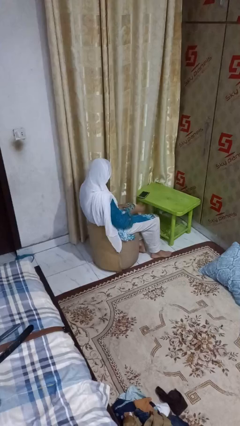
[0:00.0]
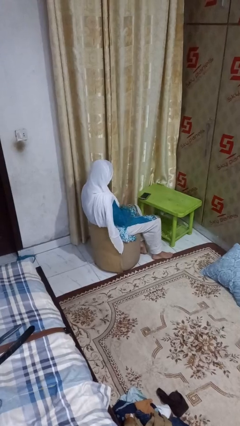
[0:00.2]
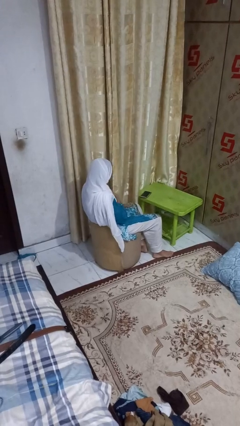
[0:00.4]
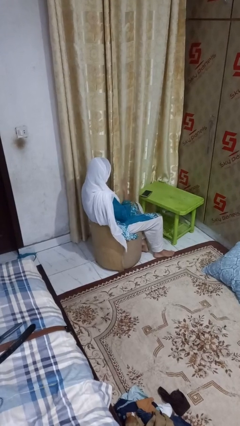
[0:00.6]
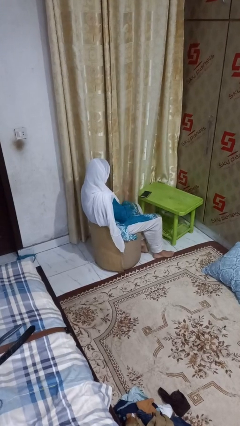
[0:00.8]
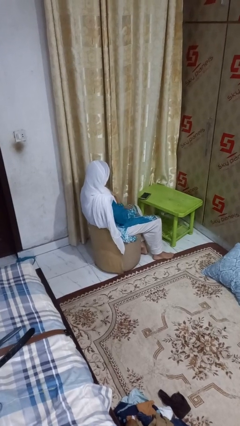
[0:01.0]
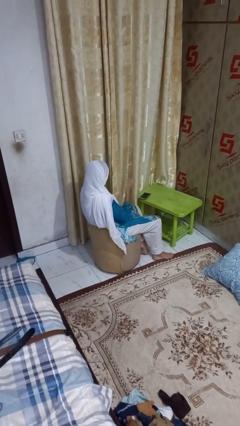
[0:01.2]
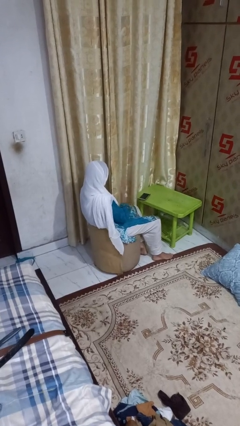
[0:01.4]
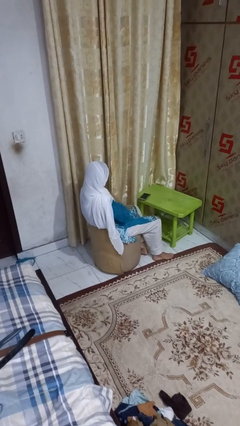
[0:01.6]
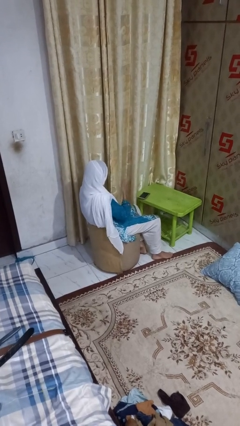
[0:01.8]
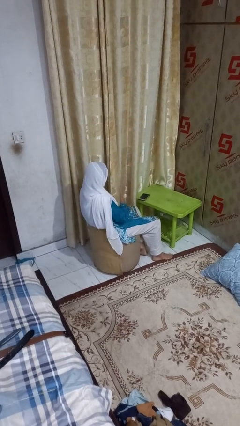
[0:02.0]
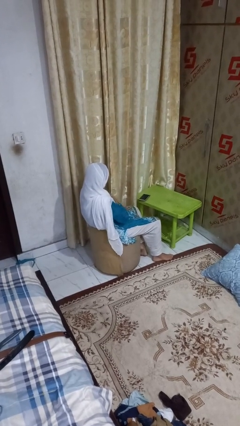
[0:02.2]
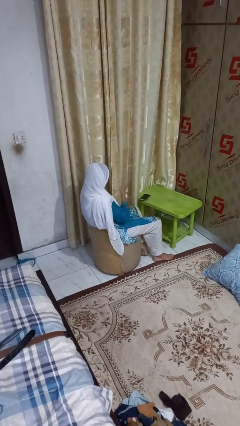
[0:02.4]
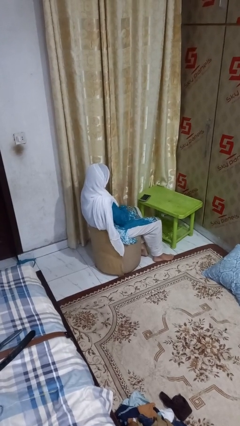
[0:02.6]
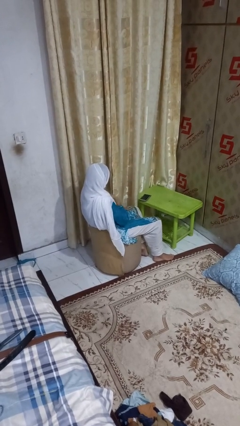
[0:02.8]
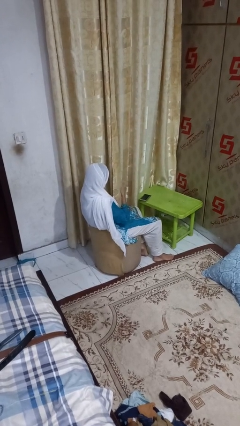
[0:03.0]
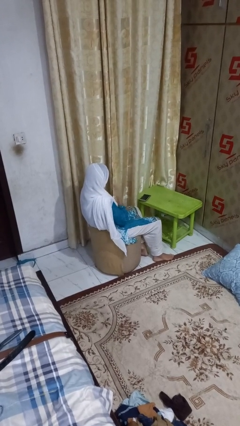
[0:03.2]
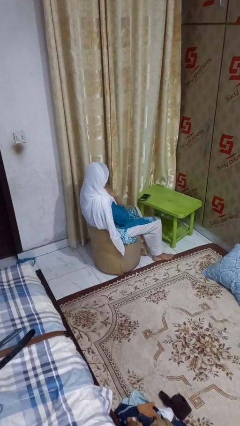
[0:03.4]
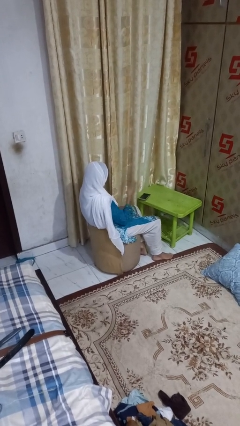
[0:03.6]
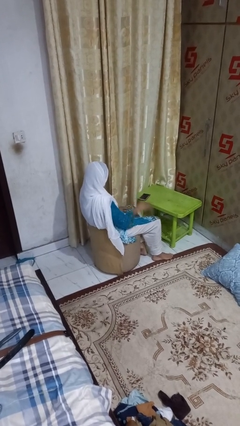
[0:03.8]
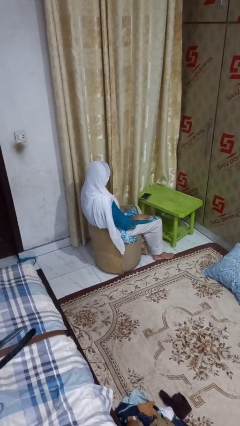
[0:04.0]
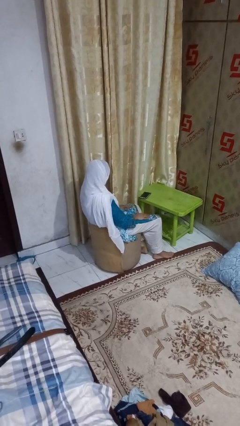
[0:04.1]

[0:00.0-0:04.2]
person drums on chest

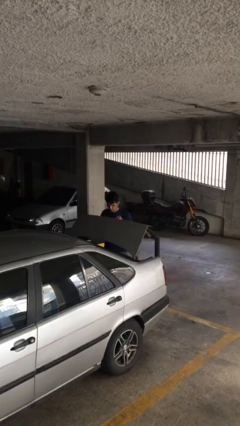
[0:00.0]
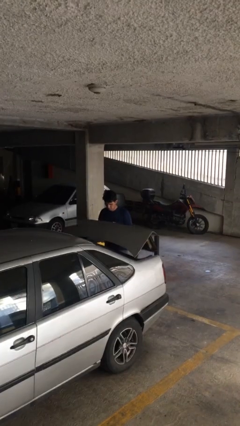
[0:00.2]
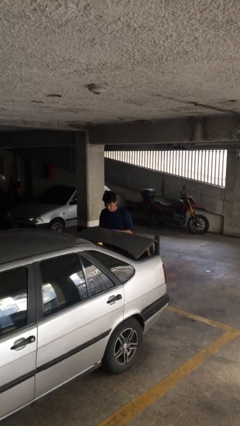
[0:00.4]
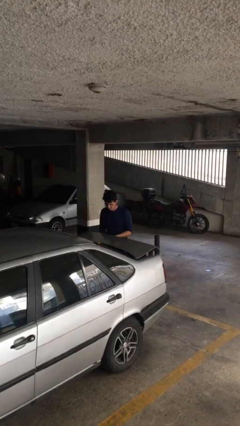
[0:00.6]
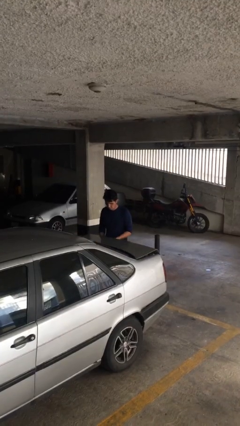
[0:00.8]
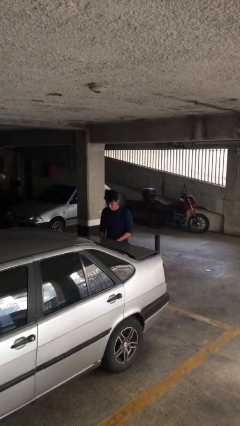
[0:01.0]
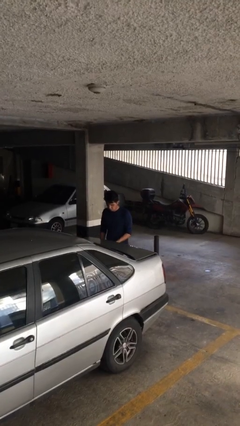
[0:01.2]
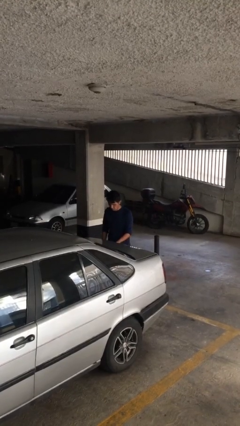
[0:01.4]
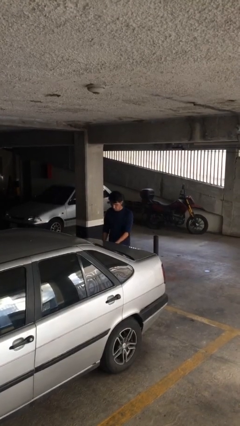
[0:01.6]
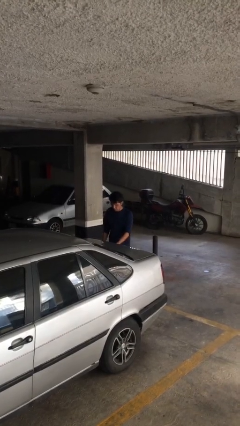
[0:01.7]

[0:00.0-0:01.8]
person closes car trunk

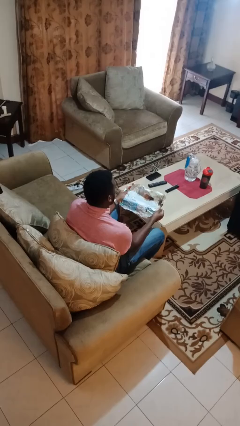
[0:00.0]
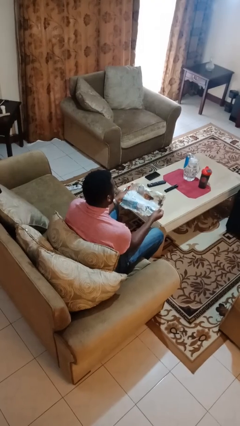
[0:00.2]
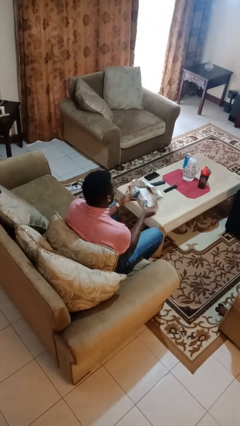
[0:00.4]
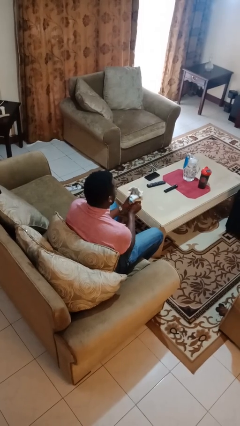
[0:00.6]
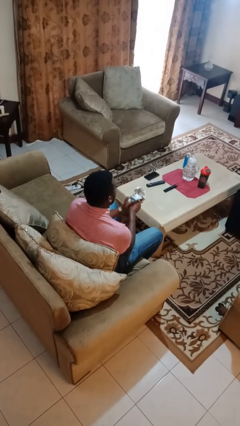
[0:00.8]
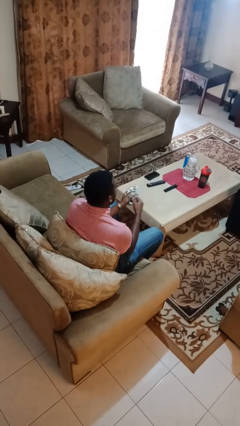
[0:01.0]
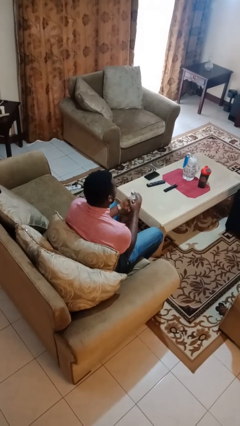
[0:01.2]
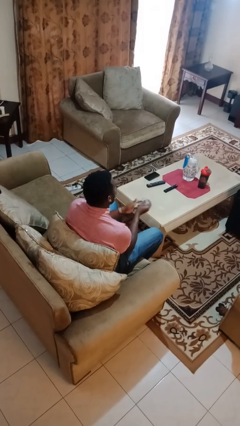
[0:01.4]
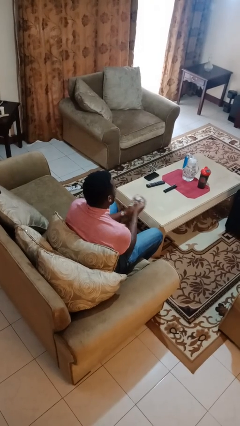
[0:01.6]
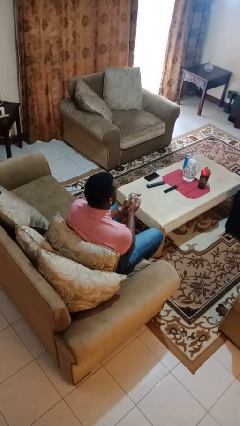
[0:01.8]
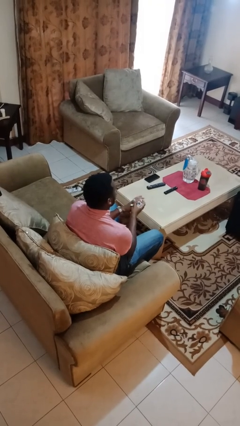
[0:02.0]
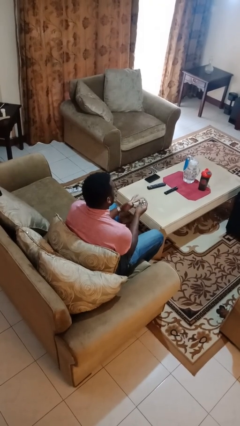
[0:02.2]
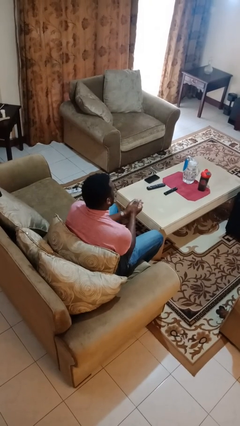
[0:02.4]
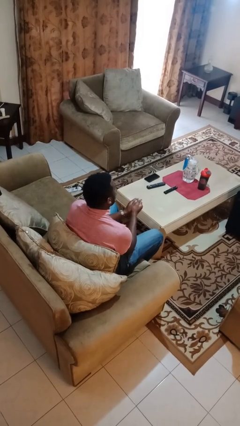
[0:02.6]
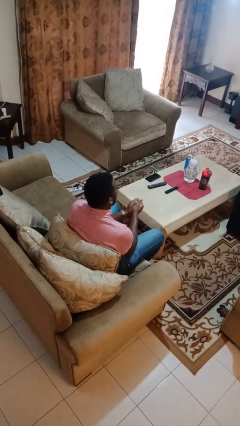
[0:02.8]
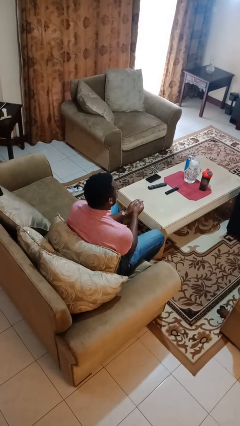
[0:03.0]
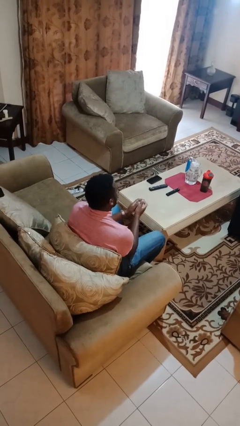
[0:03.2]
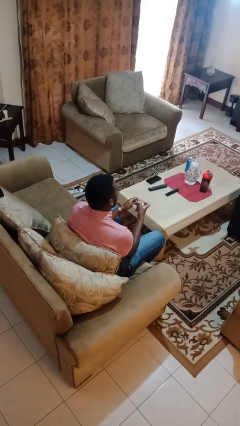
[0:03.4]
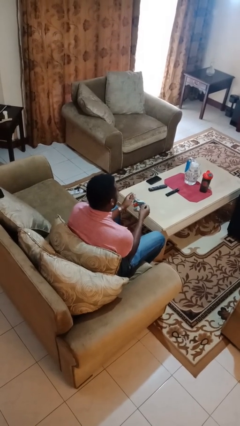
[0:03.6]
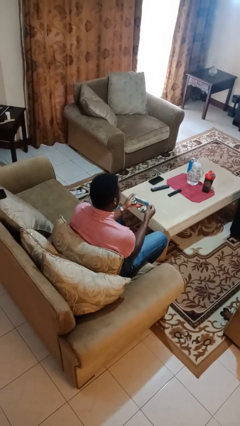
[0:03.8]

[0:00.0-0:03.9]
person crumples paper

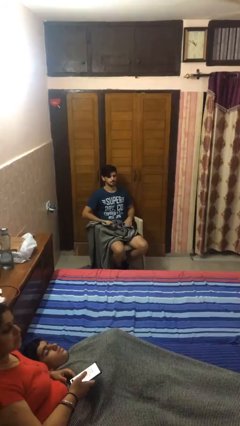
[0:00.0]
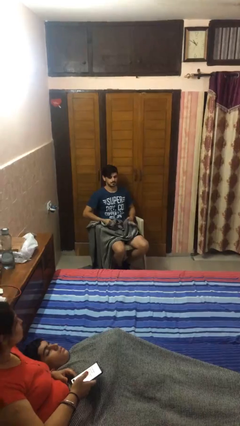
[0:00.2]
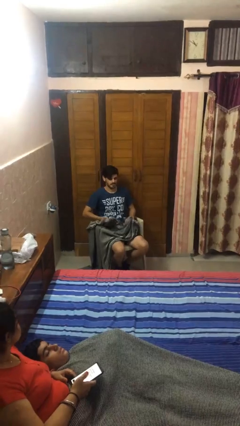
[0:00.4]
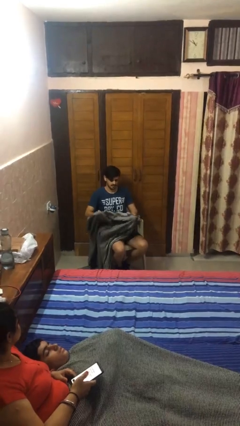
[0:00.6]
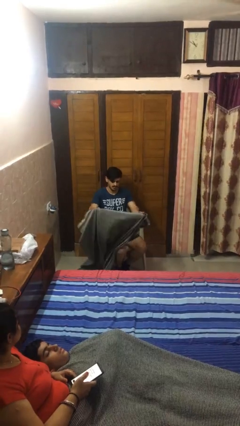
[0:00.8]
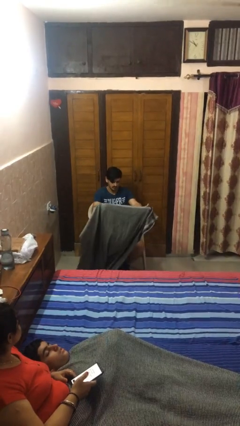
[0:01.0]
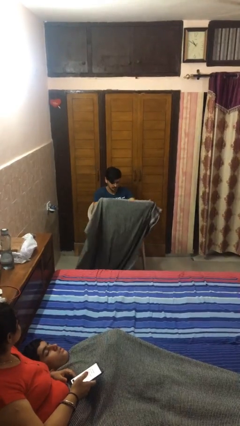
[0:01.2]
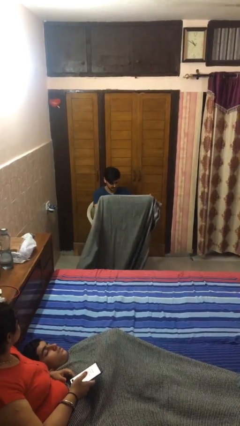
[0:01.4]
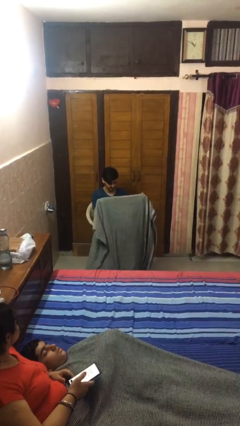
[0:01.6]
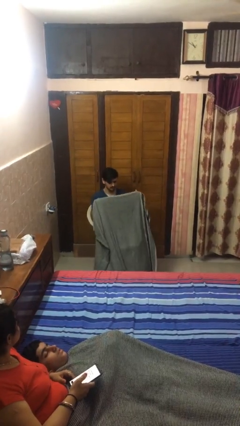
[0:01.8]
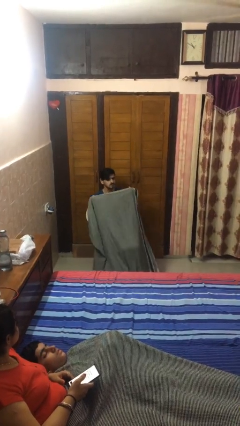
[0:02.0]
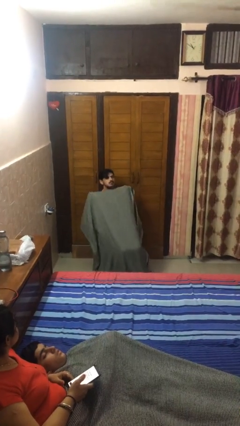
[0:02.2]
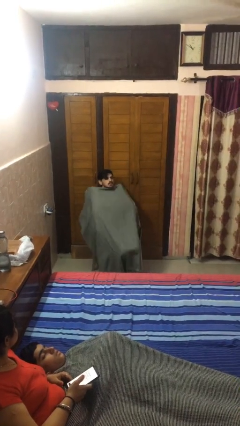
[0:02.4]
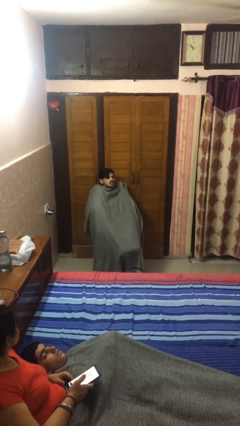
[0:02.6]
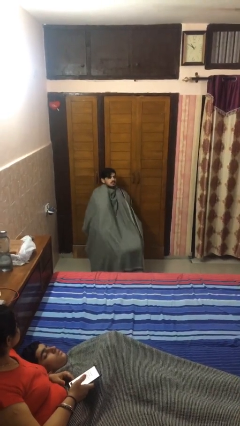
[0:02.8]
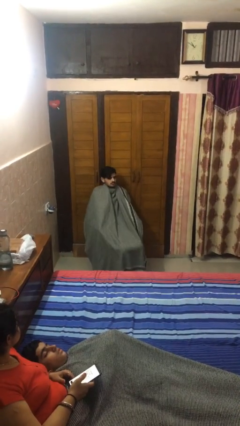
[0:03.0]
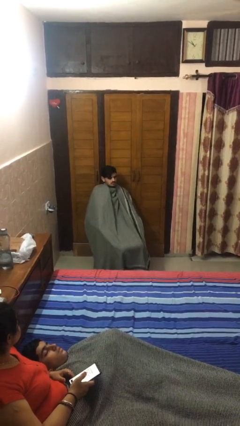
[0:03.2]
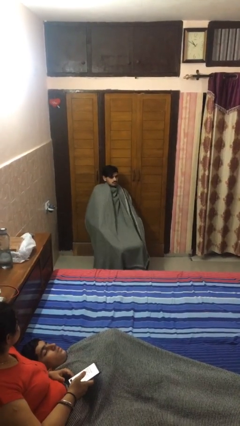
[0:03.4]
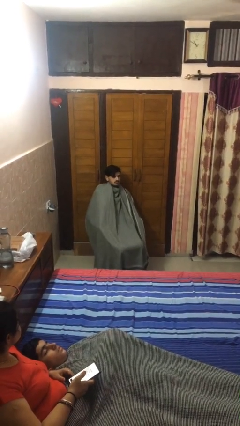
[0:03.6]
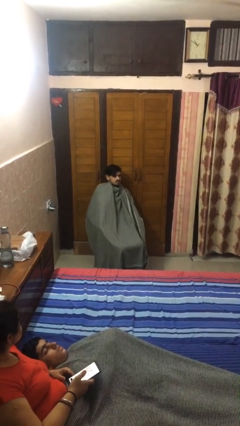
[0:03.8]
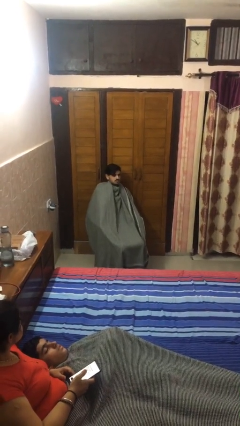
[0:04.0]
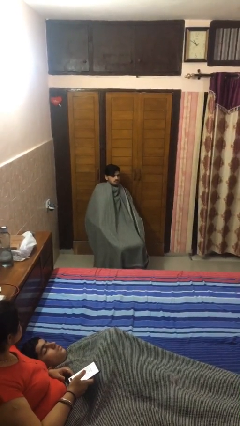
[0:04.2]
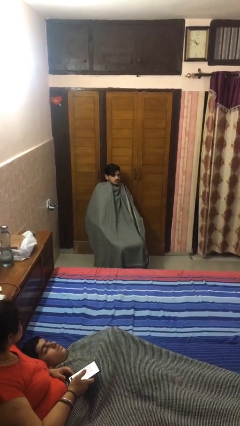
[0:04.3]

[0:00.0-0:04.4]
person covers with blanket

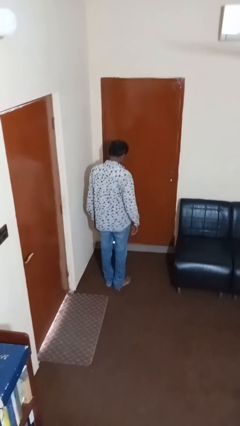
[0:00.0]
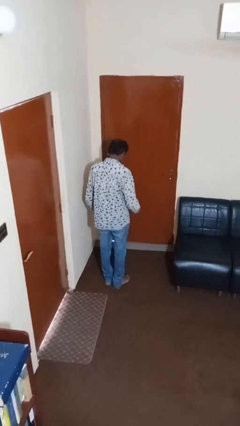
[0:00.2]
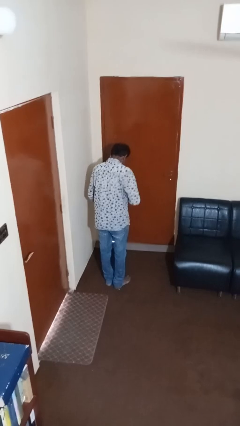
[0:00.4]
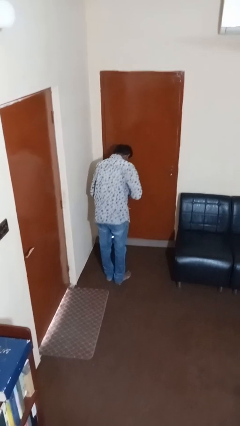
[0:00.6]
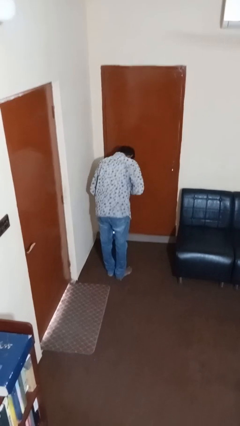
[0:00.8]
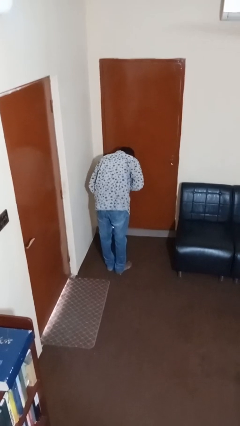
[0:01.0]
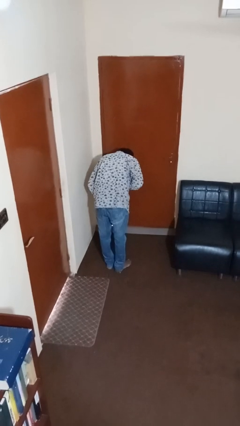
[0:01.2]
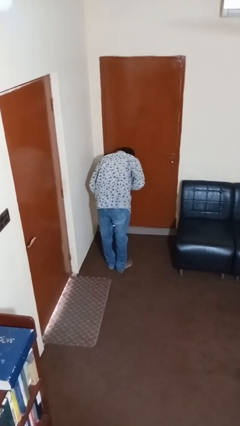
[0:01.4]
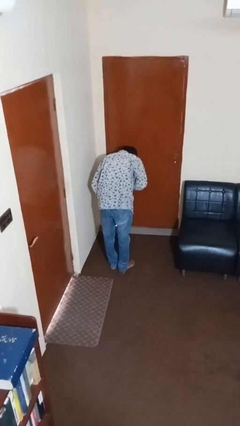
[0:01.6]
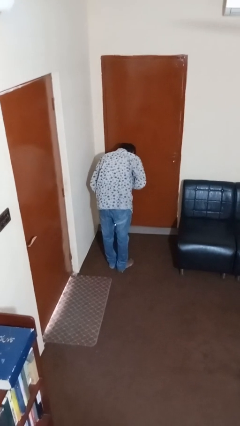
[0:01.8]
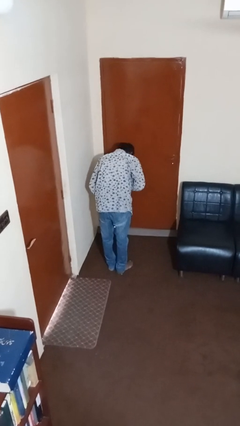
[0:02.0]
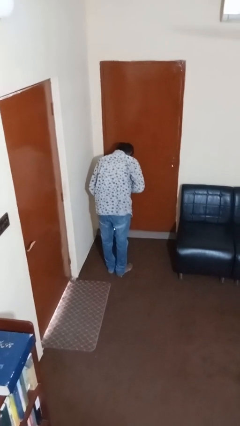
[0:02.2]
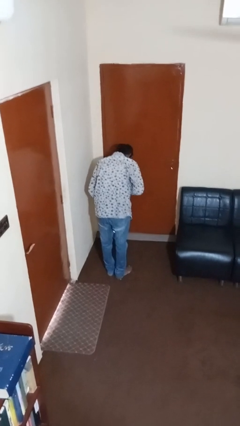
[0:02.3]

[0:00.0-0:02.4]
person bows

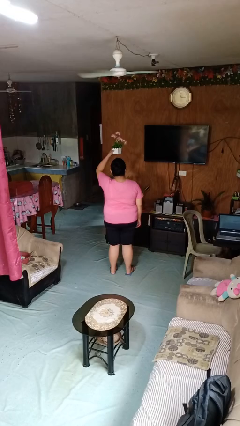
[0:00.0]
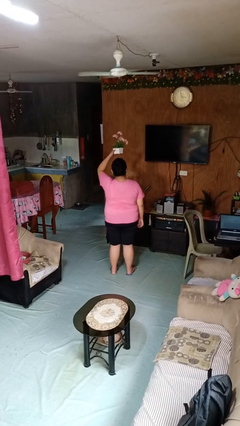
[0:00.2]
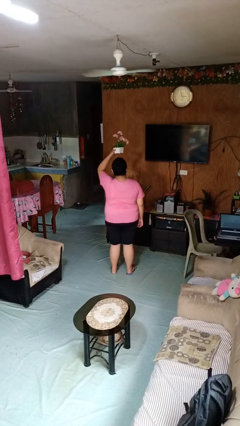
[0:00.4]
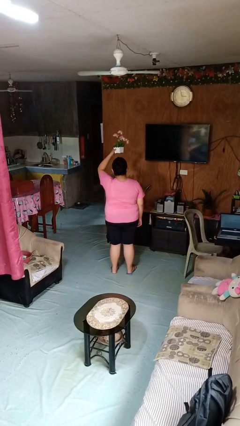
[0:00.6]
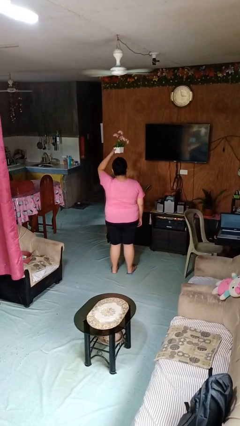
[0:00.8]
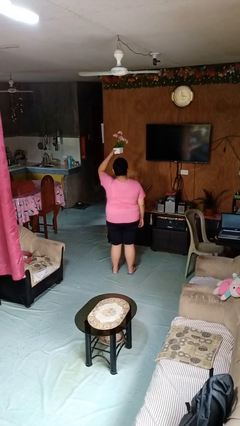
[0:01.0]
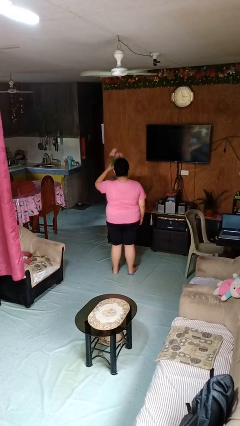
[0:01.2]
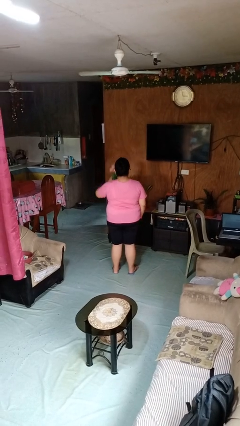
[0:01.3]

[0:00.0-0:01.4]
person holds object above head
